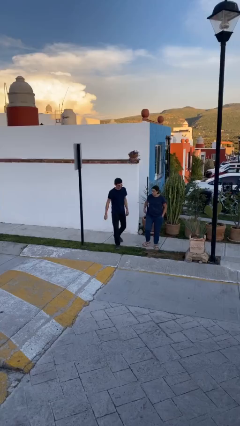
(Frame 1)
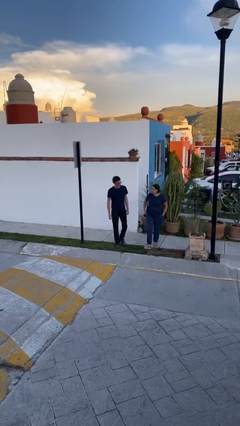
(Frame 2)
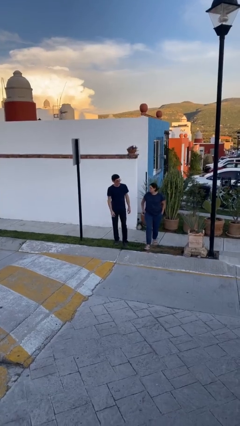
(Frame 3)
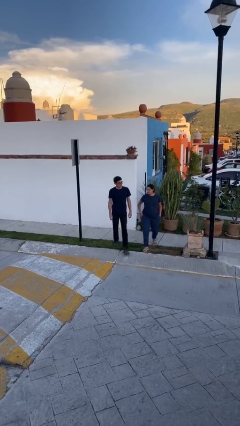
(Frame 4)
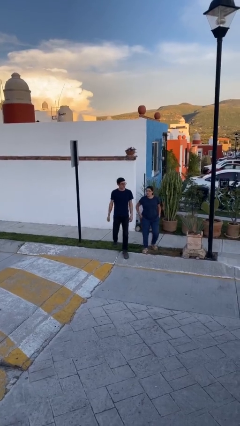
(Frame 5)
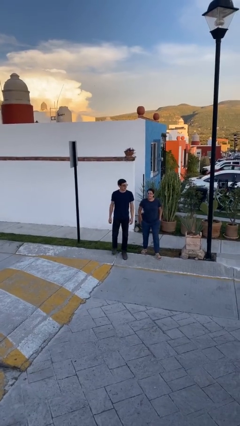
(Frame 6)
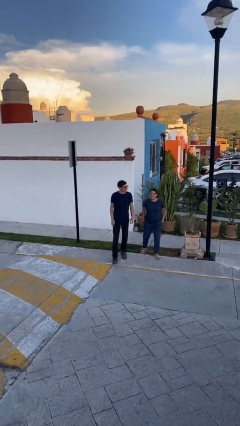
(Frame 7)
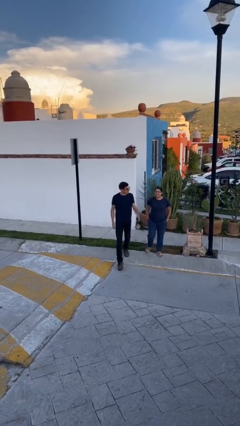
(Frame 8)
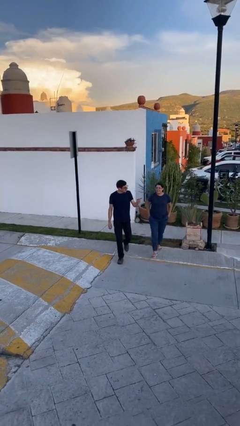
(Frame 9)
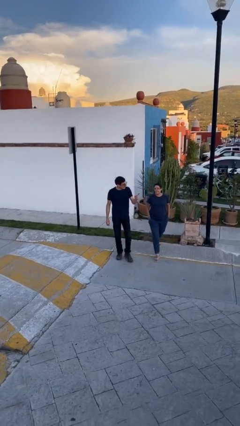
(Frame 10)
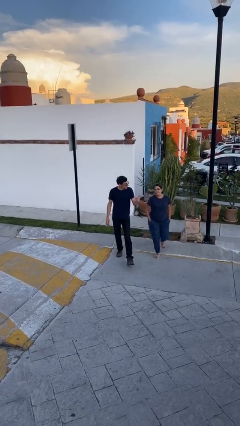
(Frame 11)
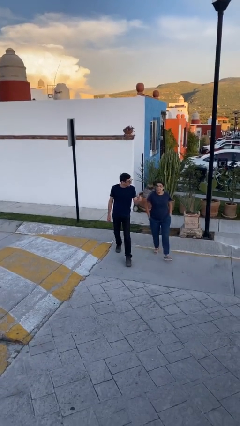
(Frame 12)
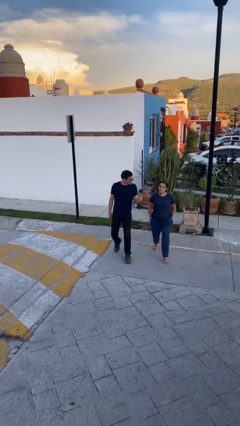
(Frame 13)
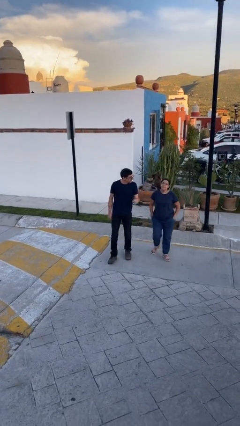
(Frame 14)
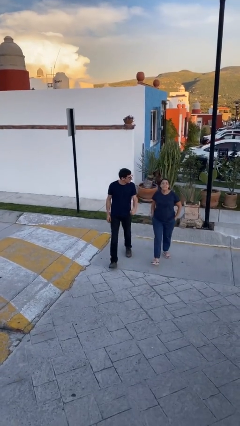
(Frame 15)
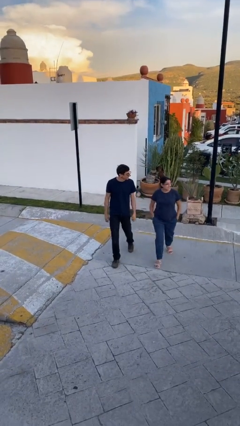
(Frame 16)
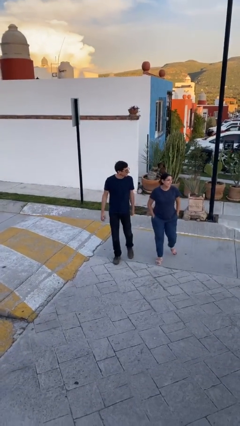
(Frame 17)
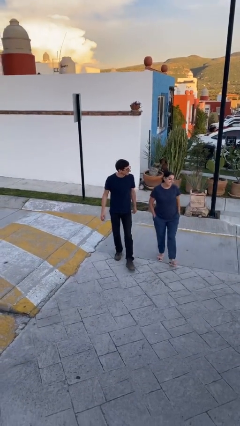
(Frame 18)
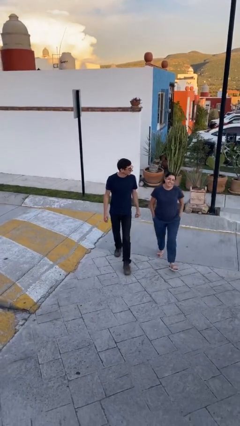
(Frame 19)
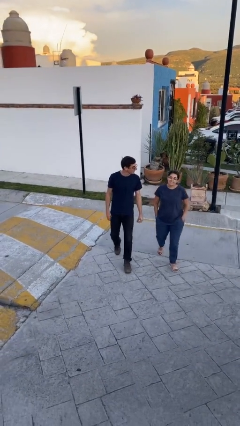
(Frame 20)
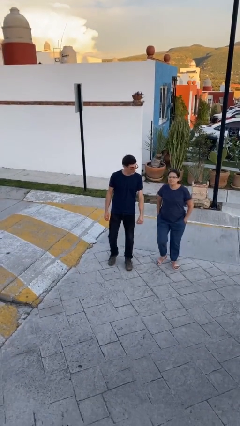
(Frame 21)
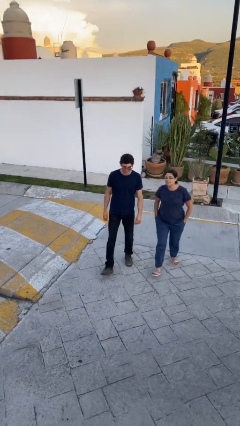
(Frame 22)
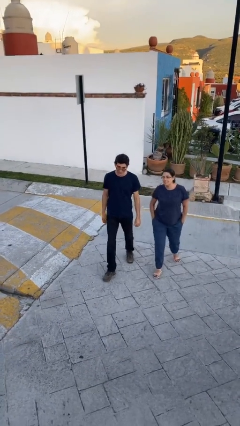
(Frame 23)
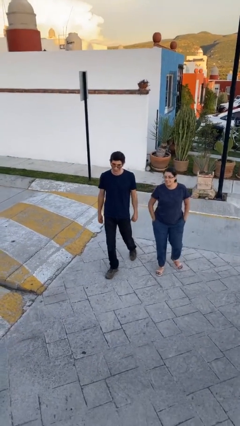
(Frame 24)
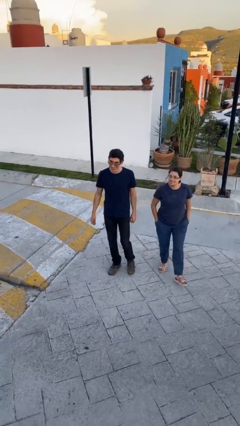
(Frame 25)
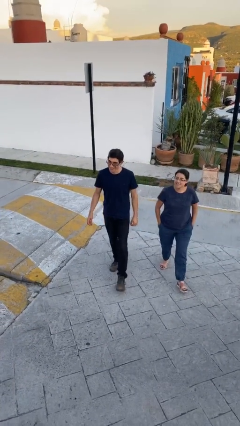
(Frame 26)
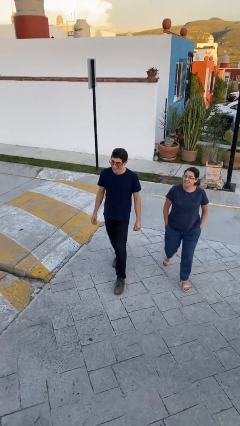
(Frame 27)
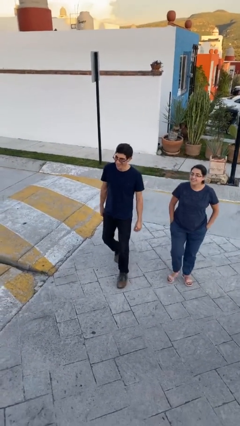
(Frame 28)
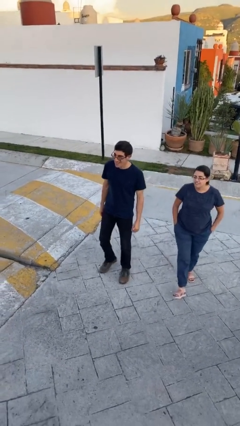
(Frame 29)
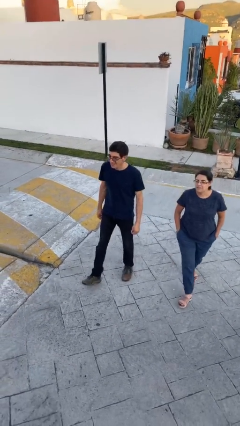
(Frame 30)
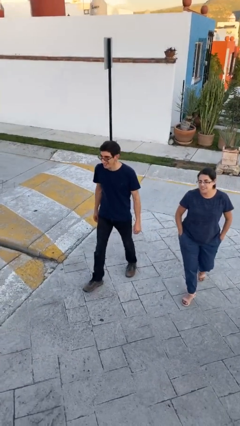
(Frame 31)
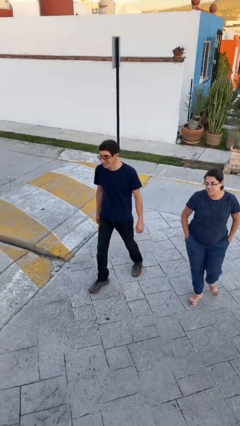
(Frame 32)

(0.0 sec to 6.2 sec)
person talks to person

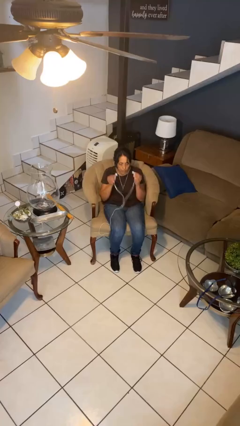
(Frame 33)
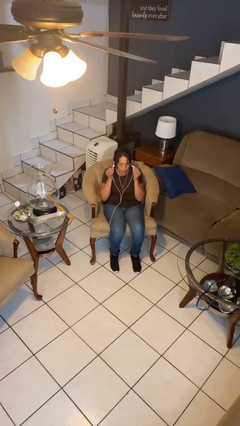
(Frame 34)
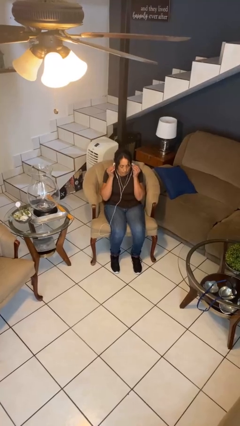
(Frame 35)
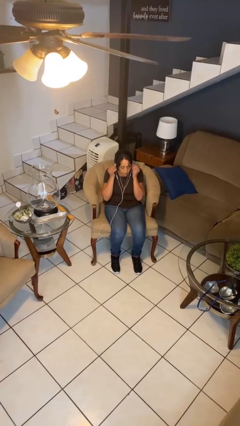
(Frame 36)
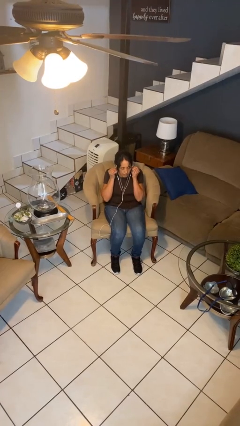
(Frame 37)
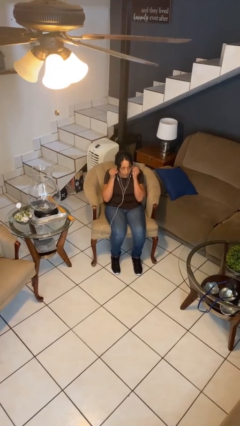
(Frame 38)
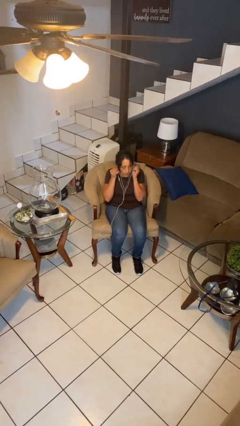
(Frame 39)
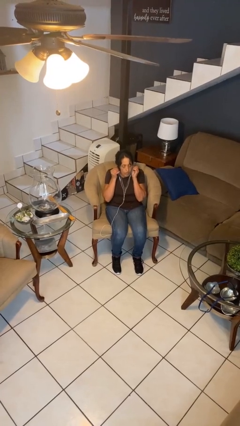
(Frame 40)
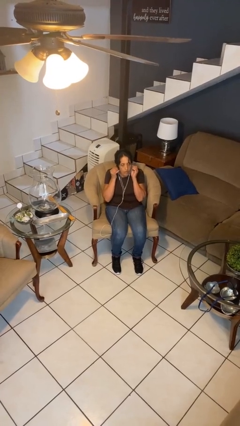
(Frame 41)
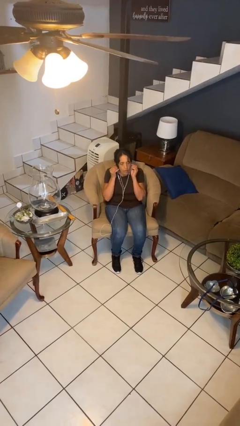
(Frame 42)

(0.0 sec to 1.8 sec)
person puts on headphones

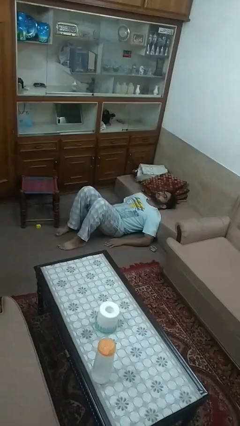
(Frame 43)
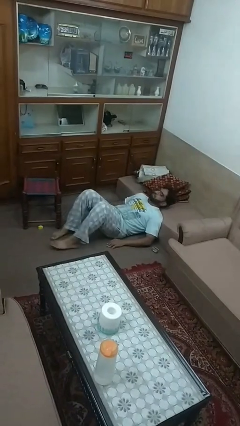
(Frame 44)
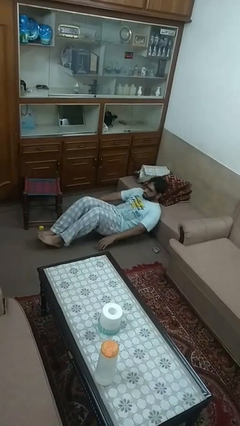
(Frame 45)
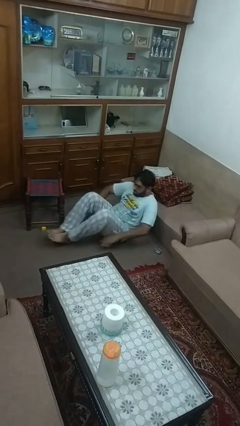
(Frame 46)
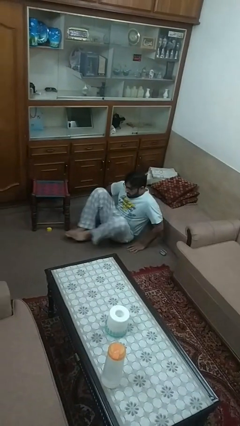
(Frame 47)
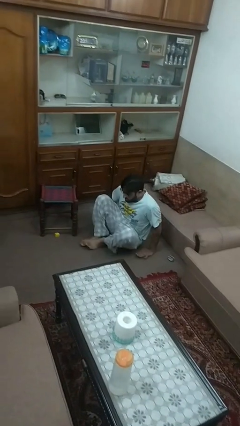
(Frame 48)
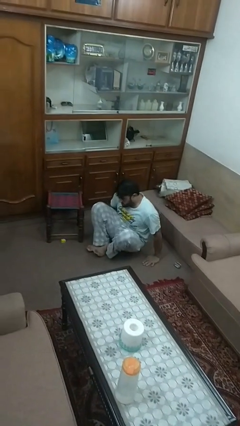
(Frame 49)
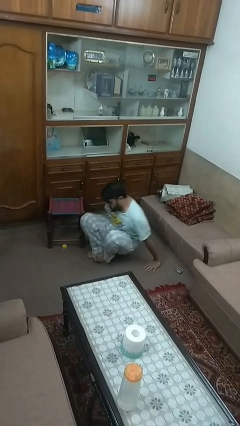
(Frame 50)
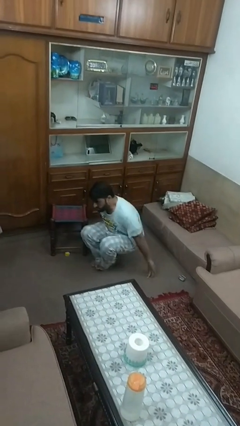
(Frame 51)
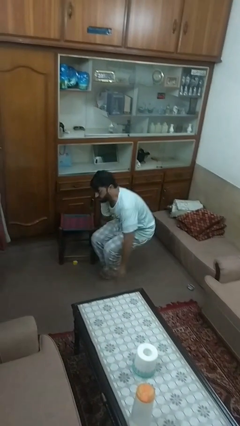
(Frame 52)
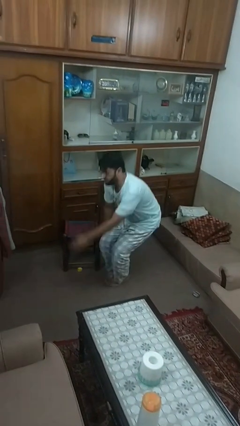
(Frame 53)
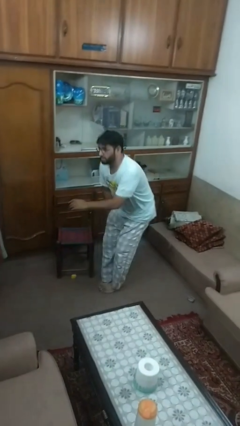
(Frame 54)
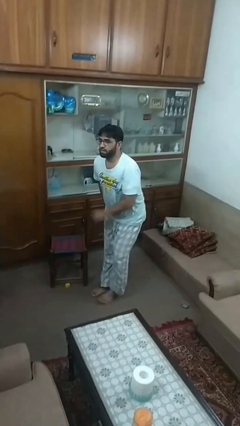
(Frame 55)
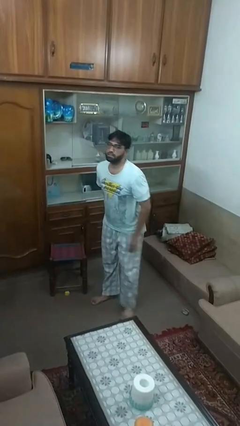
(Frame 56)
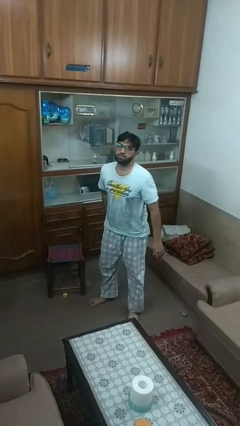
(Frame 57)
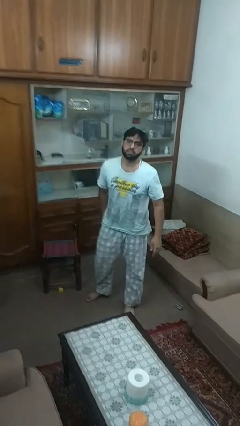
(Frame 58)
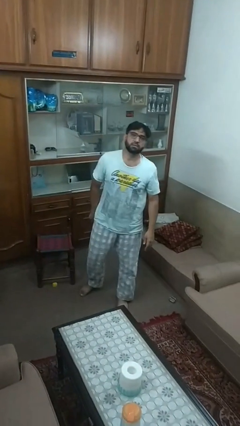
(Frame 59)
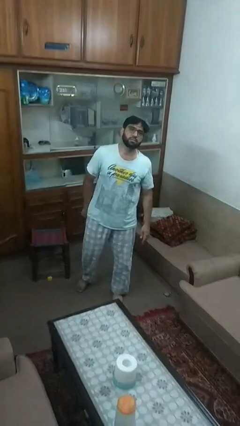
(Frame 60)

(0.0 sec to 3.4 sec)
person stands up from floor

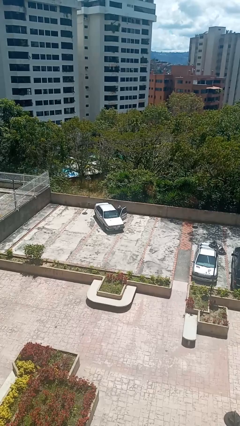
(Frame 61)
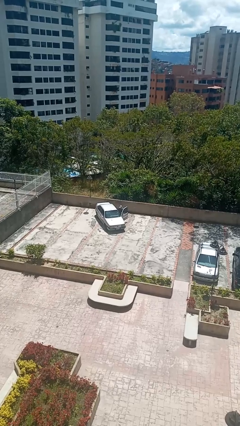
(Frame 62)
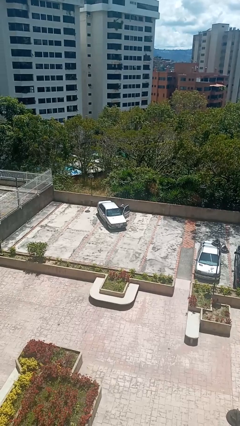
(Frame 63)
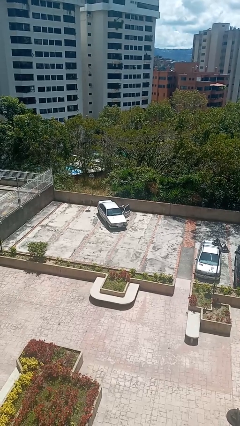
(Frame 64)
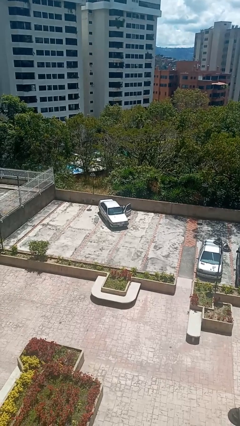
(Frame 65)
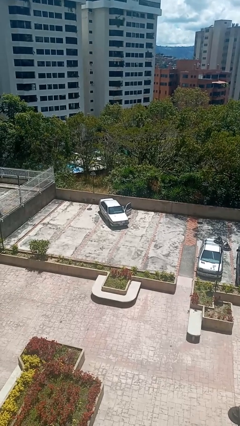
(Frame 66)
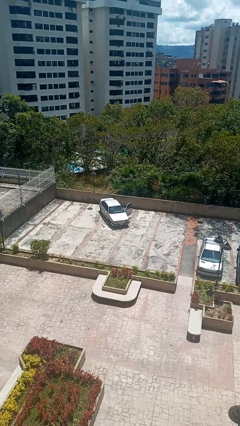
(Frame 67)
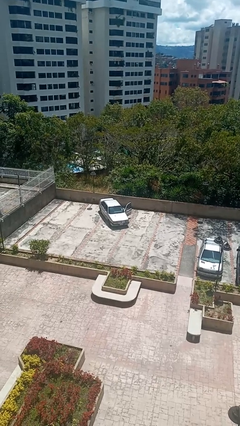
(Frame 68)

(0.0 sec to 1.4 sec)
person enters car

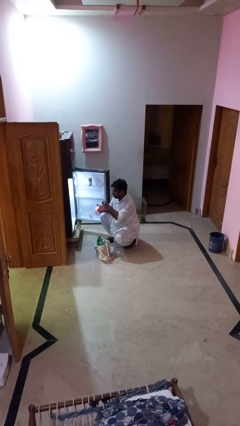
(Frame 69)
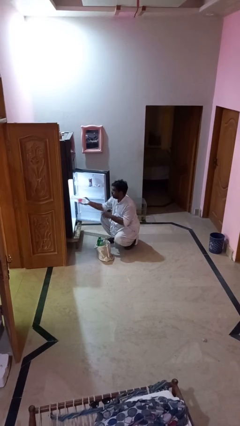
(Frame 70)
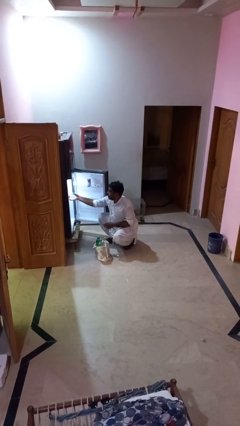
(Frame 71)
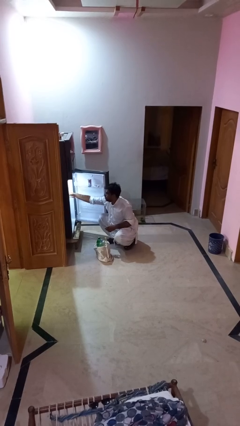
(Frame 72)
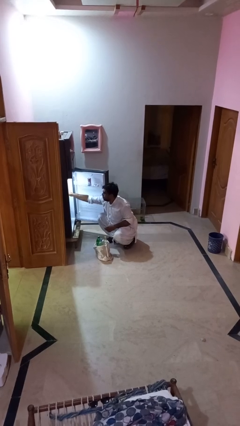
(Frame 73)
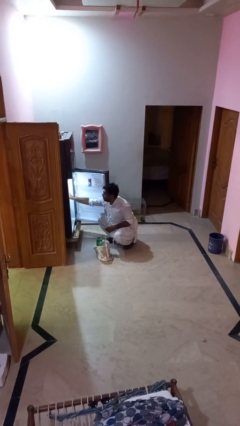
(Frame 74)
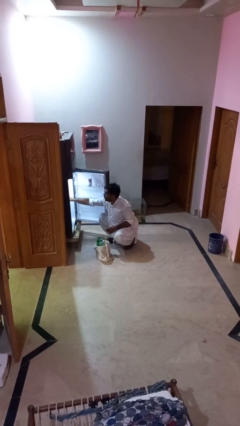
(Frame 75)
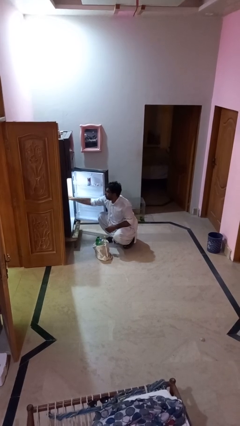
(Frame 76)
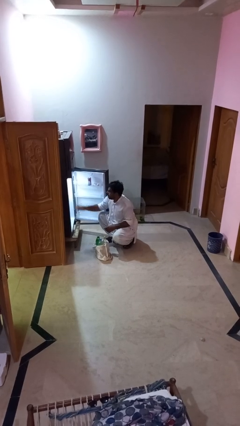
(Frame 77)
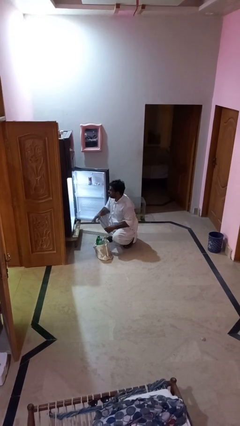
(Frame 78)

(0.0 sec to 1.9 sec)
person loads groceries into refrigerator

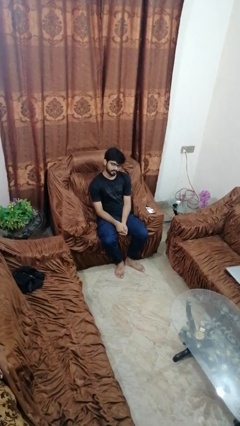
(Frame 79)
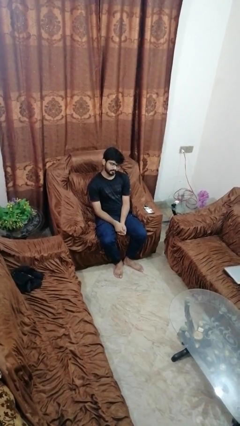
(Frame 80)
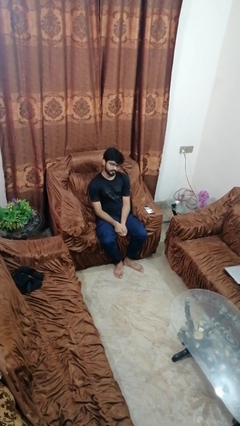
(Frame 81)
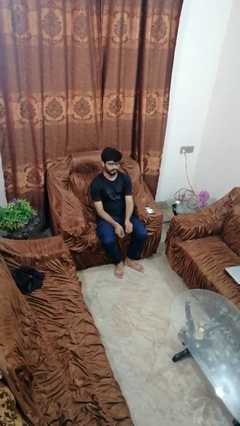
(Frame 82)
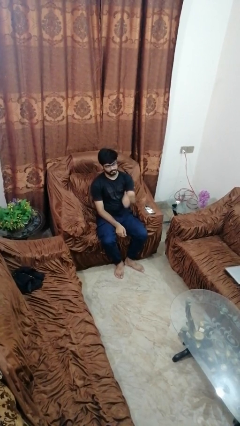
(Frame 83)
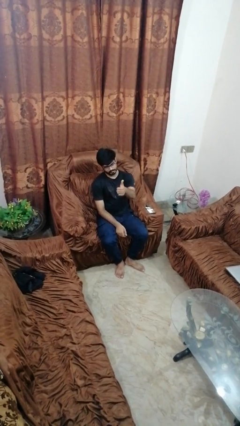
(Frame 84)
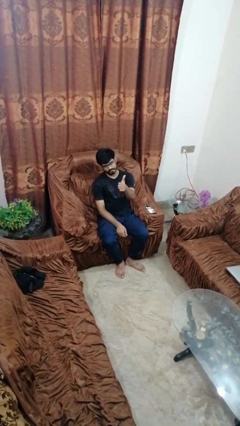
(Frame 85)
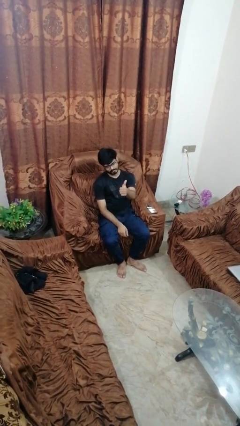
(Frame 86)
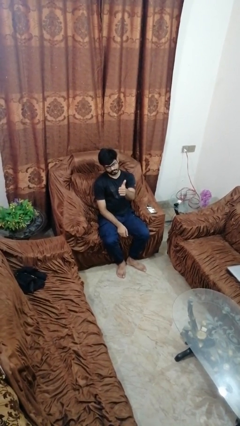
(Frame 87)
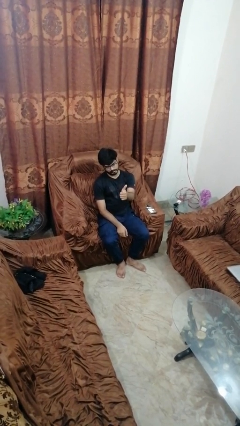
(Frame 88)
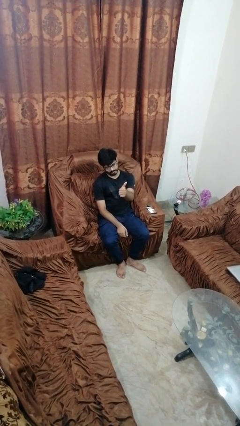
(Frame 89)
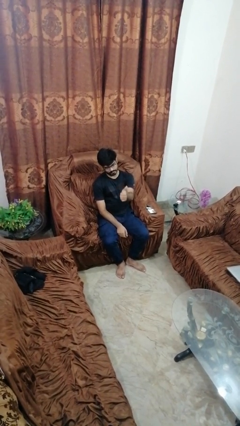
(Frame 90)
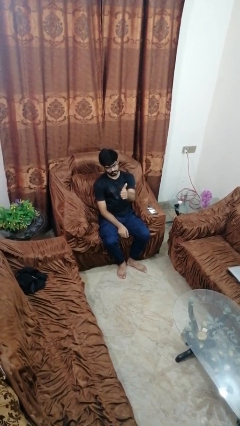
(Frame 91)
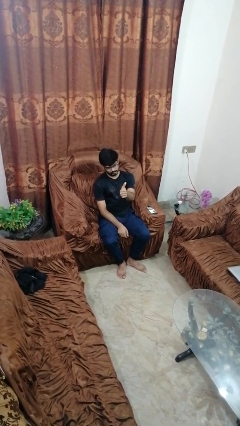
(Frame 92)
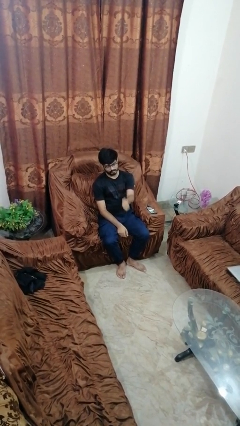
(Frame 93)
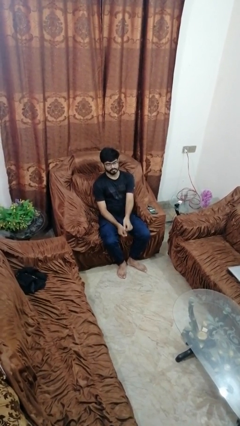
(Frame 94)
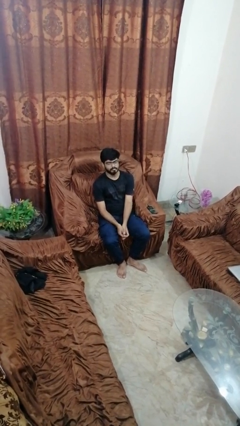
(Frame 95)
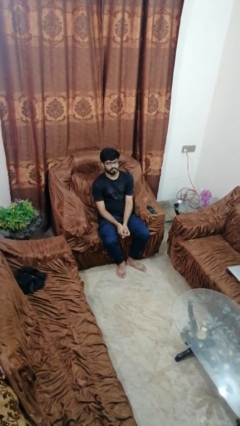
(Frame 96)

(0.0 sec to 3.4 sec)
person gestures thumbs up
